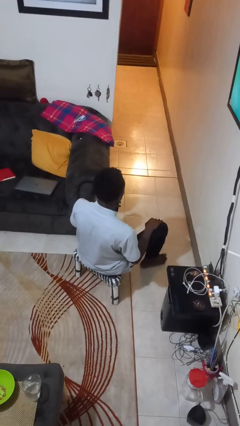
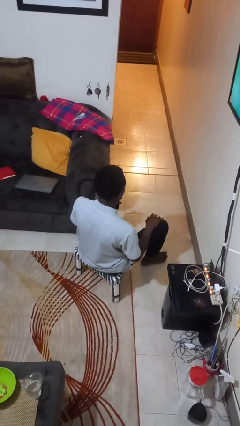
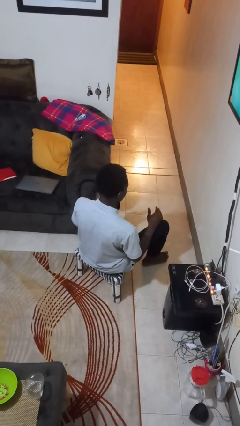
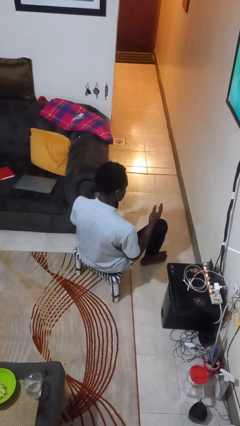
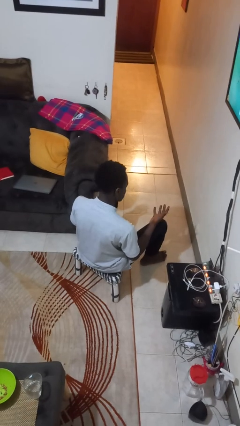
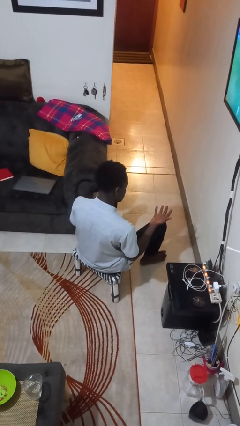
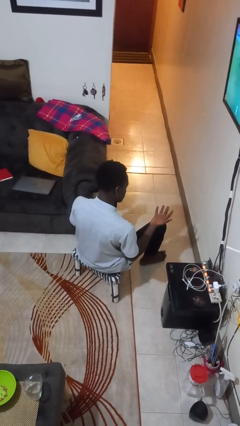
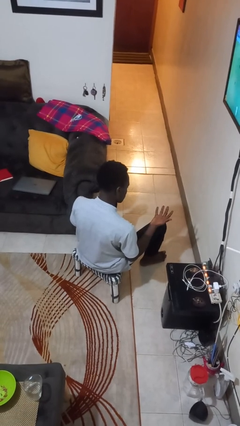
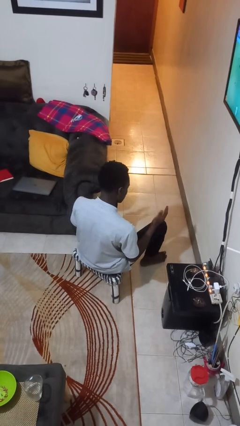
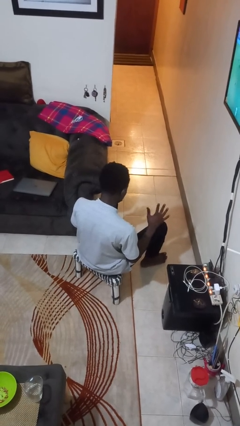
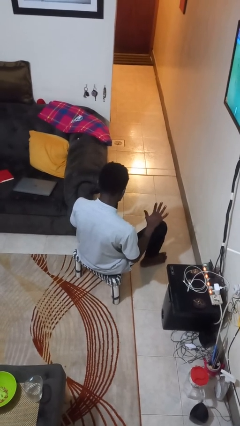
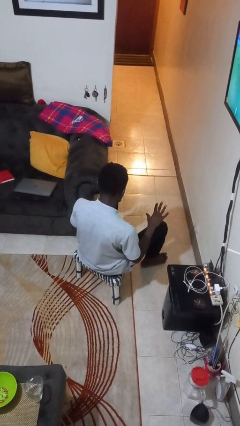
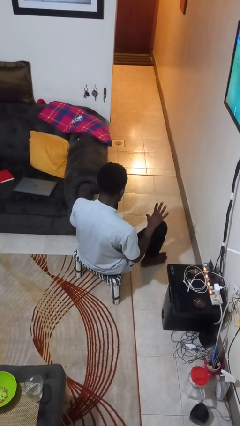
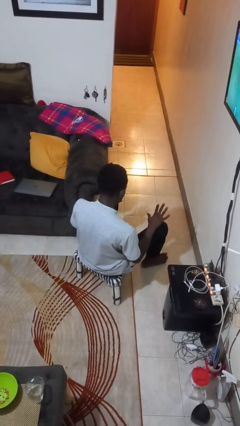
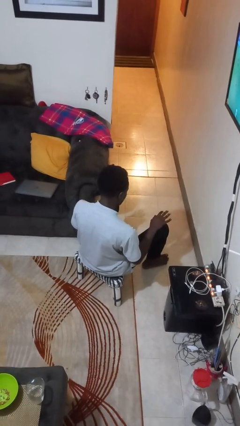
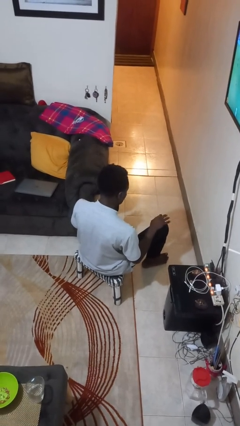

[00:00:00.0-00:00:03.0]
person looks at hands in lap

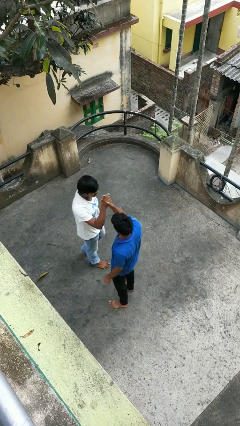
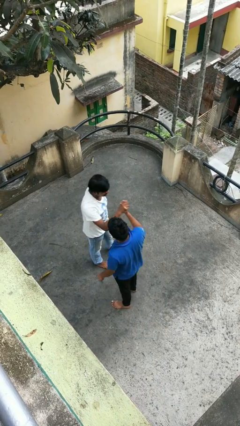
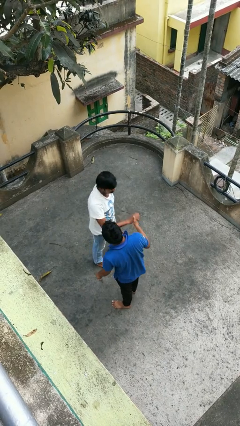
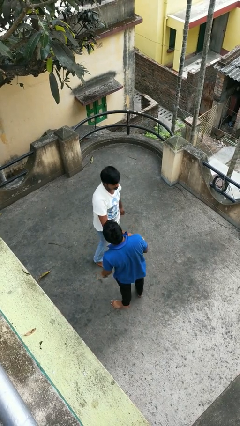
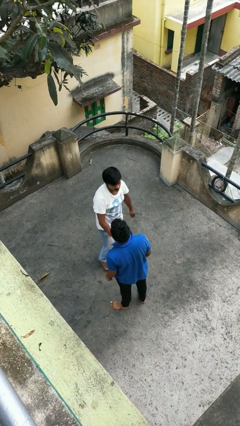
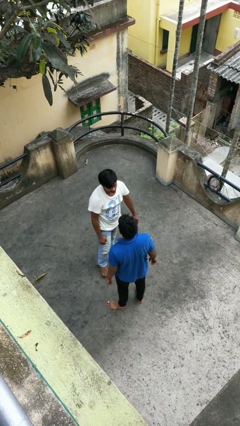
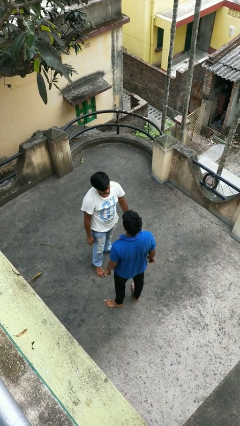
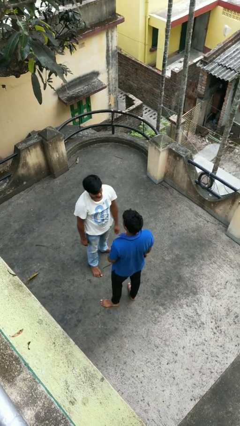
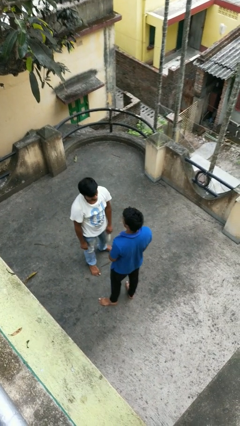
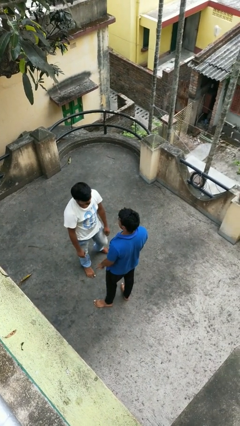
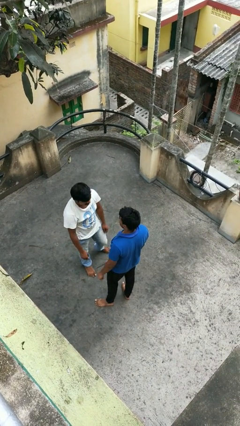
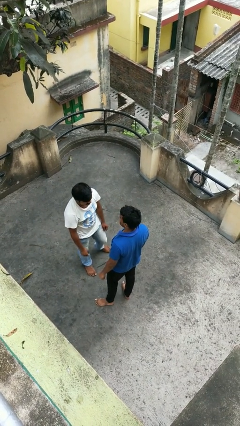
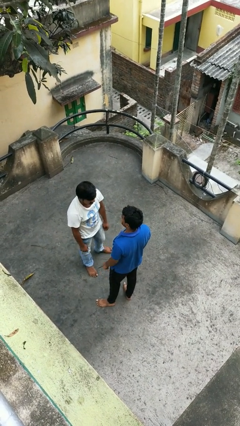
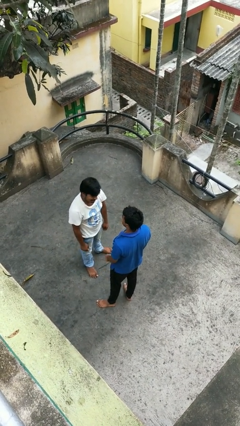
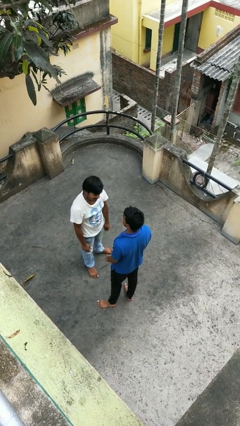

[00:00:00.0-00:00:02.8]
person highfives hand

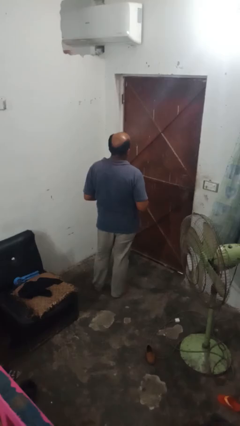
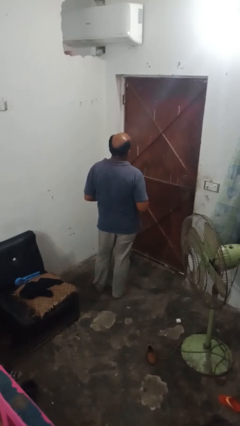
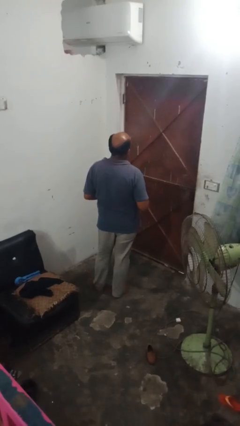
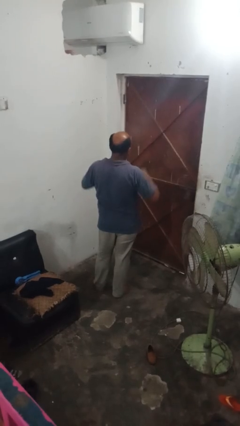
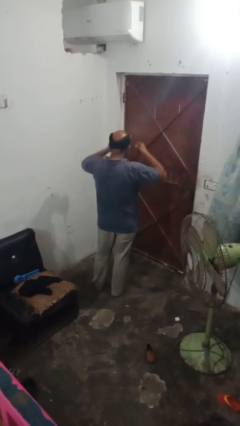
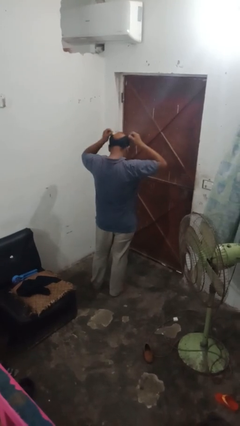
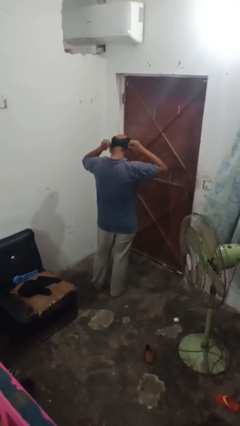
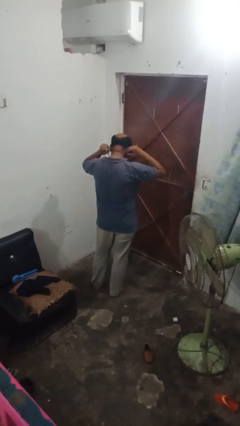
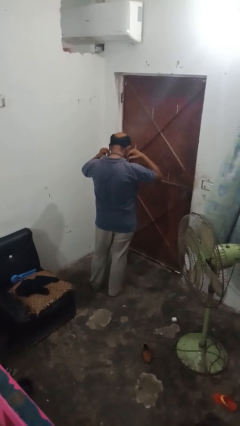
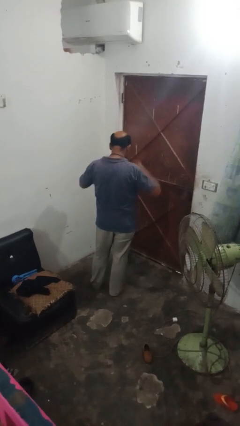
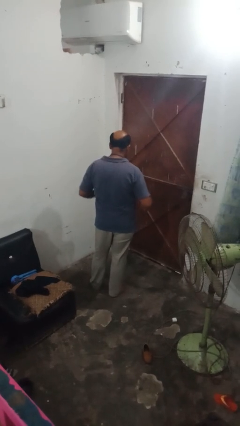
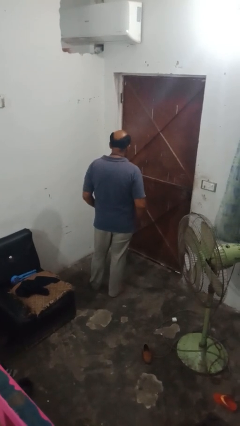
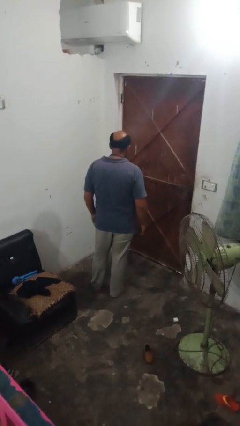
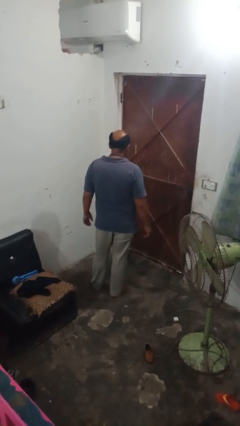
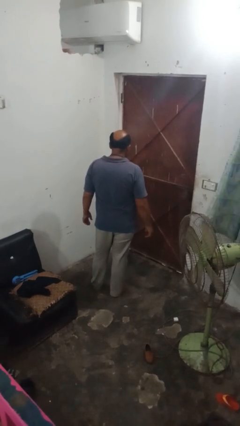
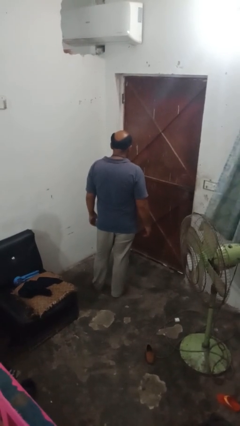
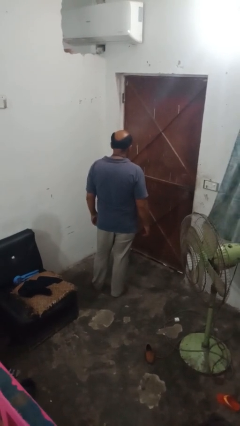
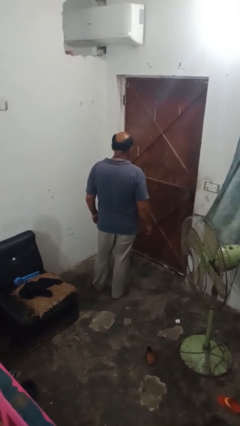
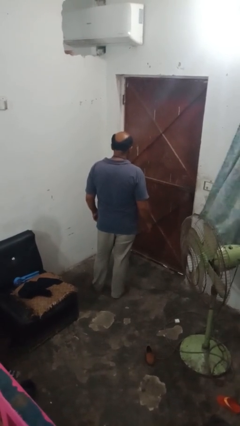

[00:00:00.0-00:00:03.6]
person puts on necklace

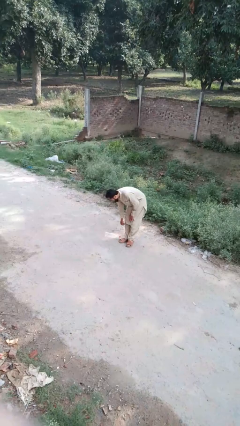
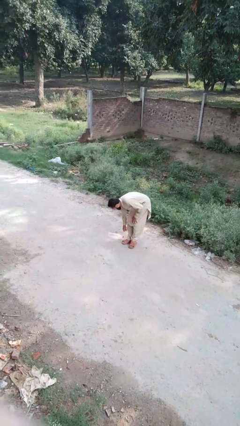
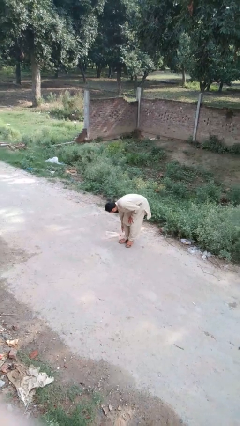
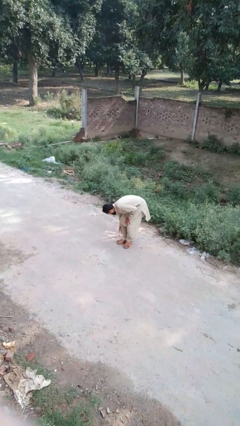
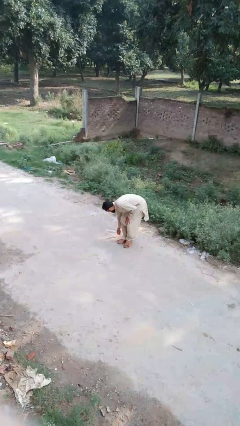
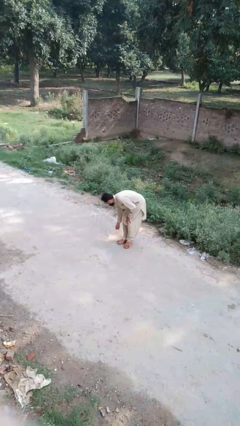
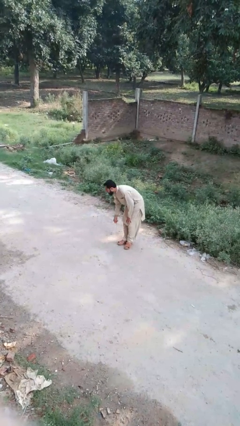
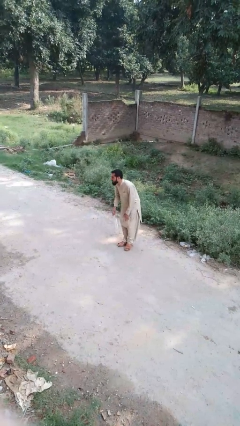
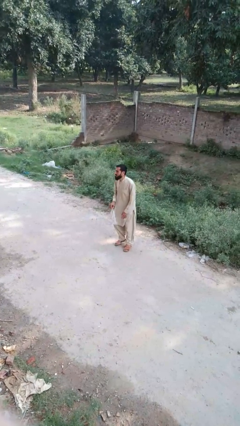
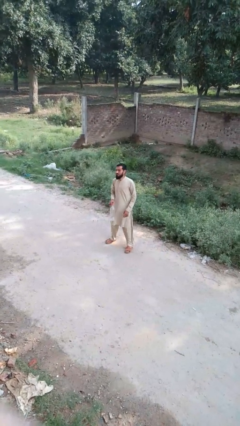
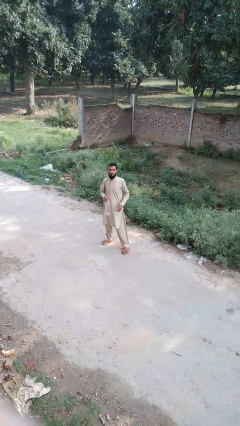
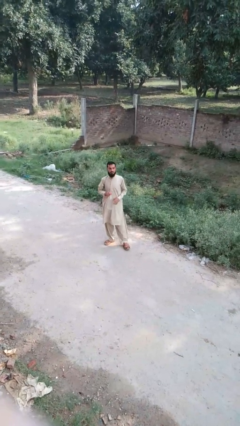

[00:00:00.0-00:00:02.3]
person picks up object from floor

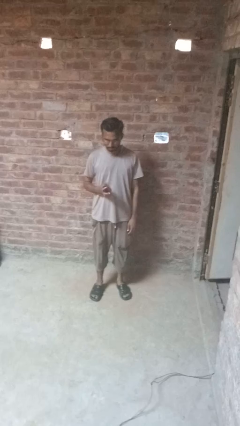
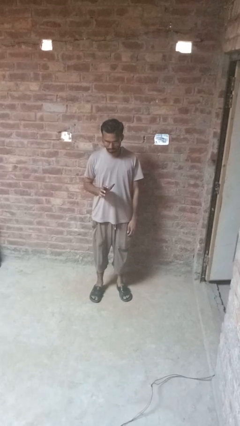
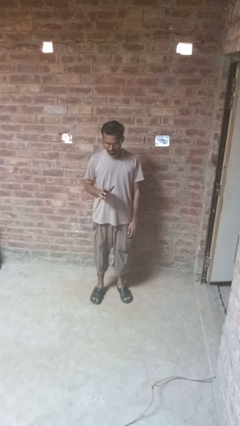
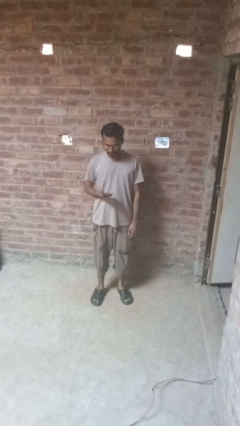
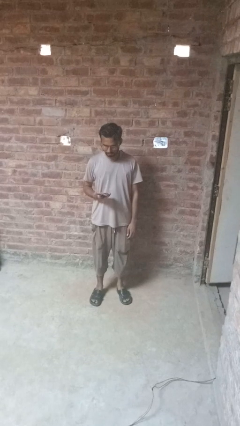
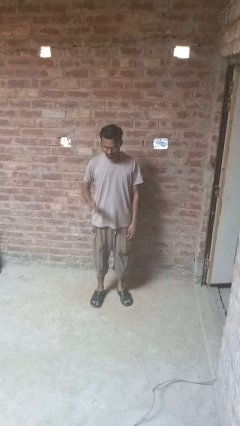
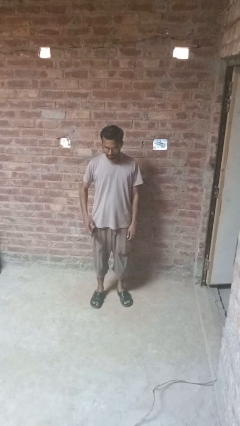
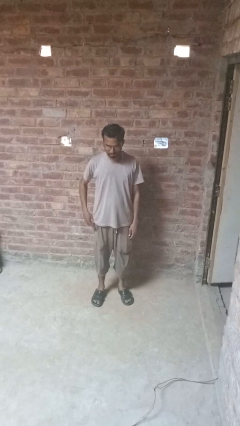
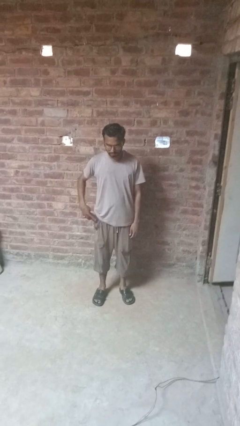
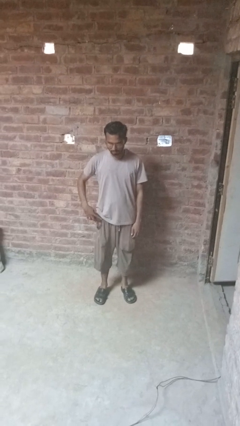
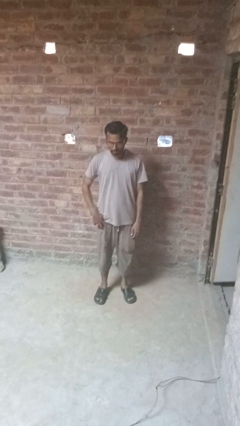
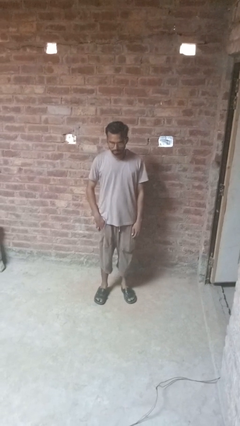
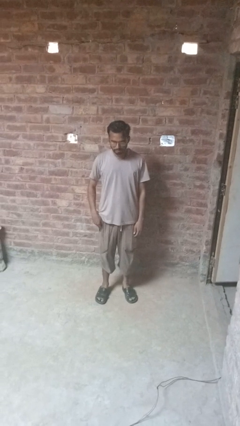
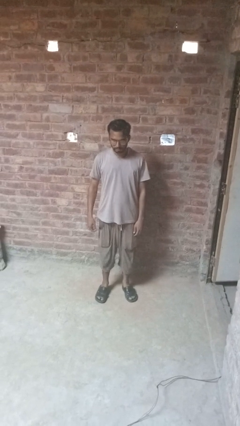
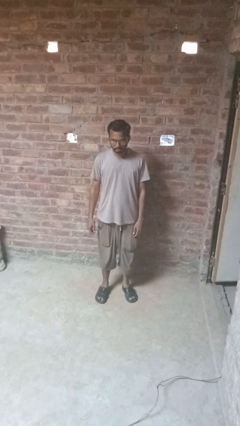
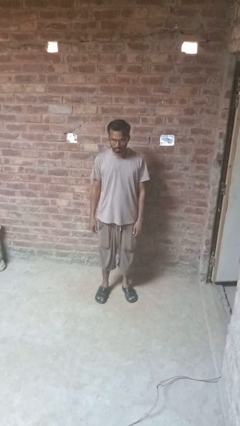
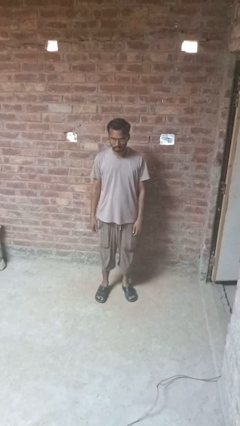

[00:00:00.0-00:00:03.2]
person puts phone into pocket

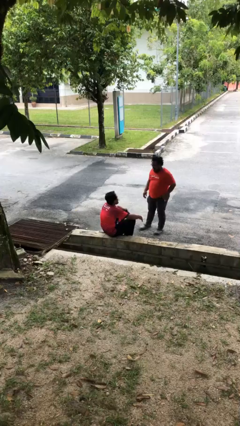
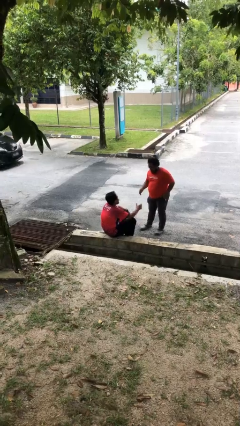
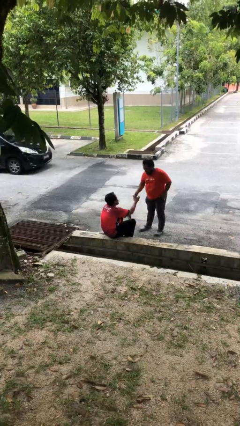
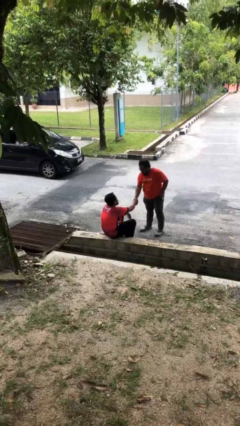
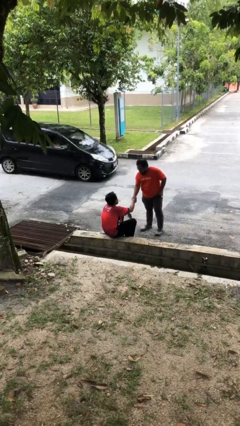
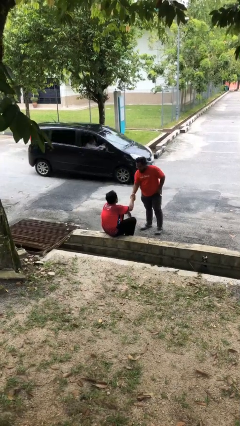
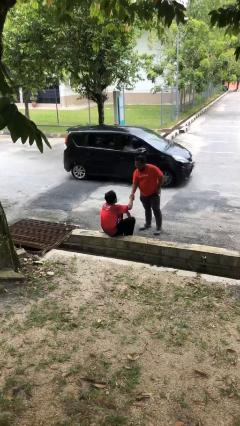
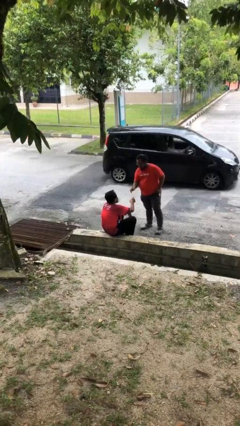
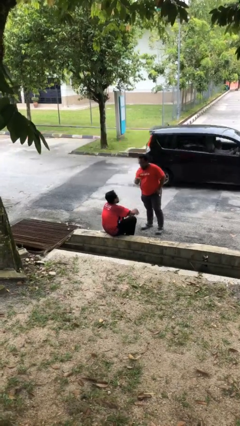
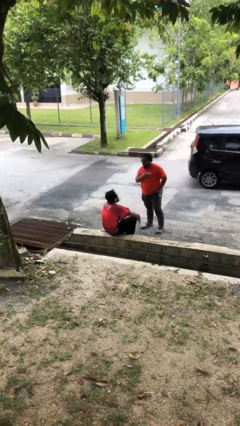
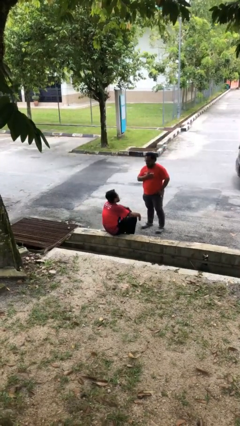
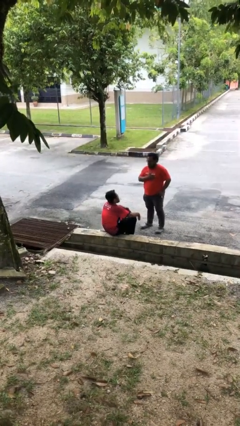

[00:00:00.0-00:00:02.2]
person shakes hand
